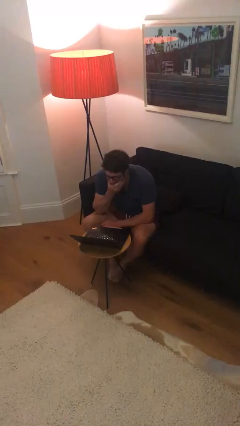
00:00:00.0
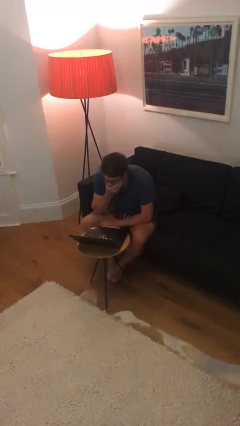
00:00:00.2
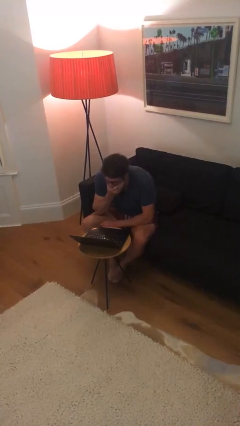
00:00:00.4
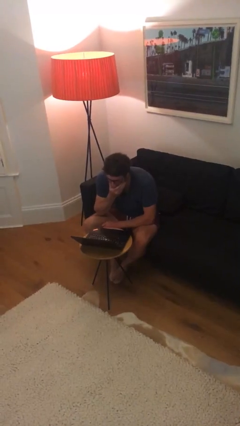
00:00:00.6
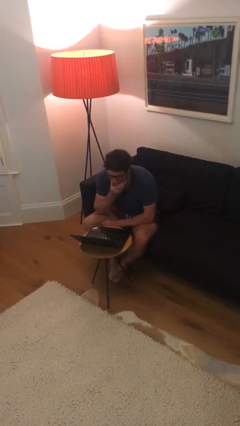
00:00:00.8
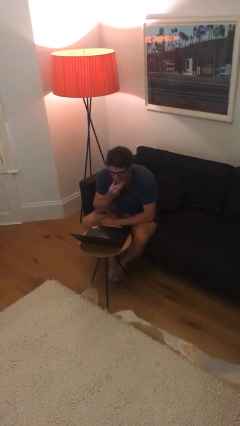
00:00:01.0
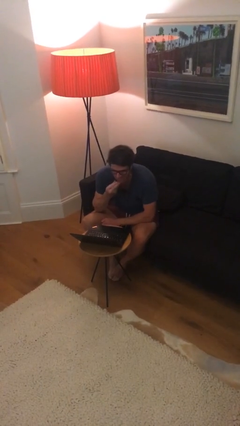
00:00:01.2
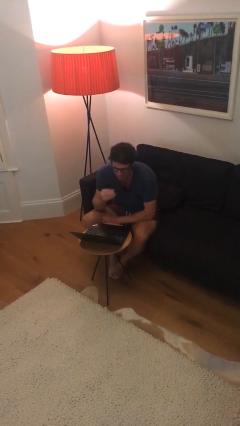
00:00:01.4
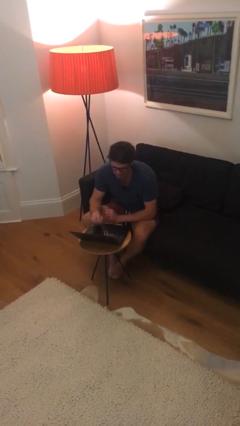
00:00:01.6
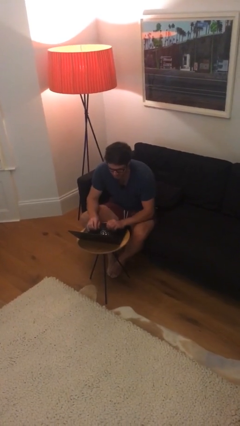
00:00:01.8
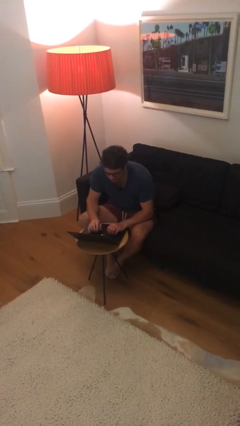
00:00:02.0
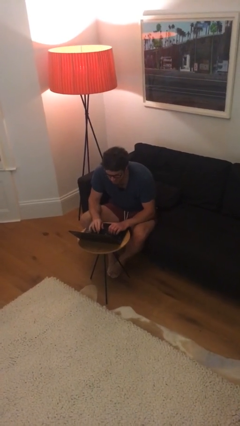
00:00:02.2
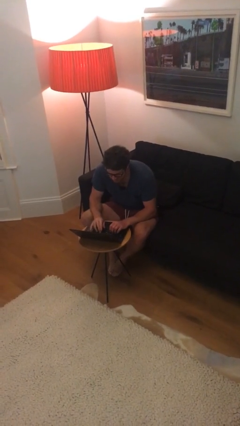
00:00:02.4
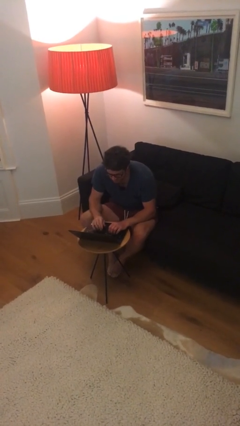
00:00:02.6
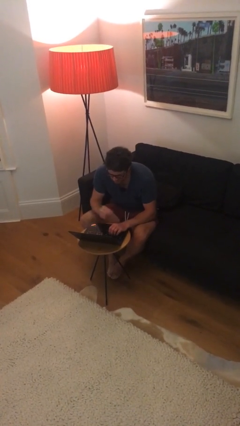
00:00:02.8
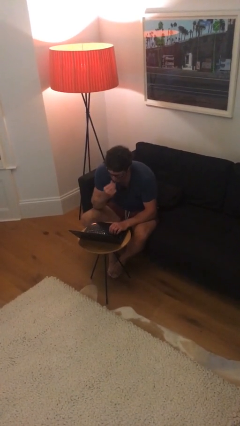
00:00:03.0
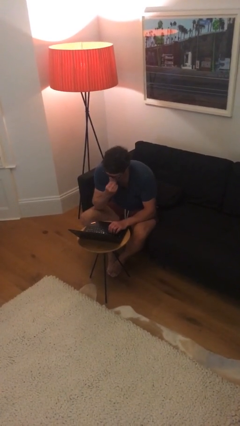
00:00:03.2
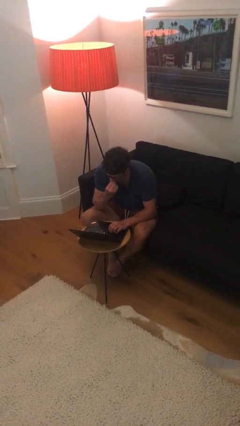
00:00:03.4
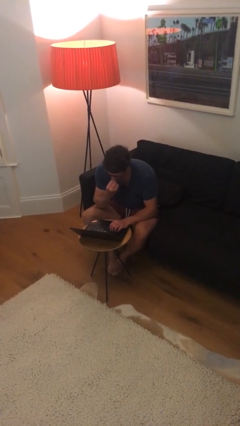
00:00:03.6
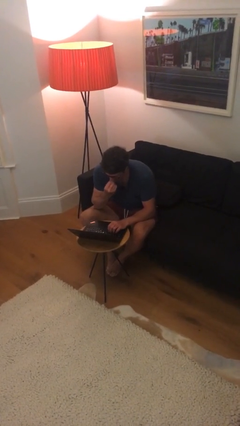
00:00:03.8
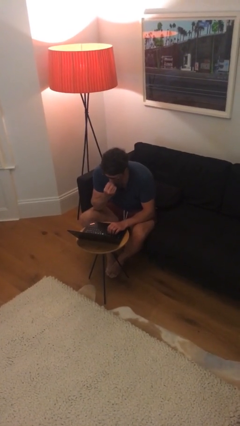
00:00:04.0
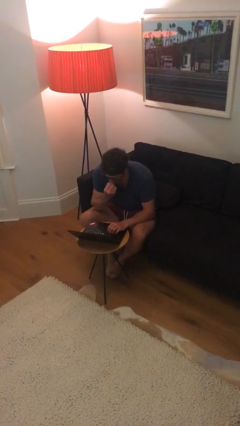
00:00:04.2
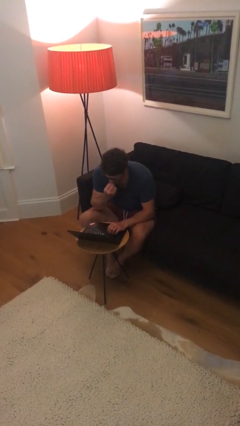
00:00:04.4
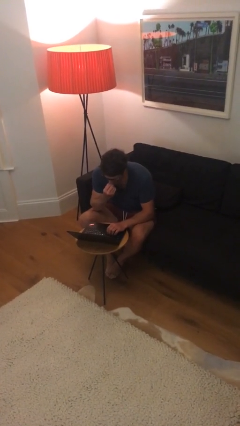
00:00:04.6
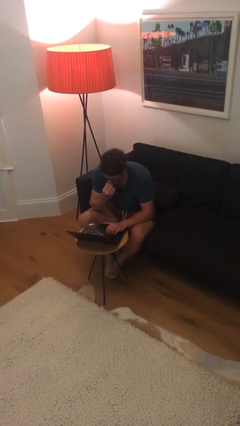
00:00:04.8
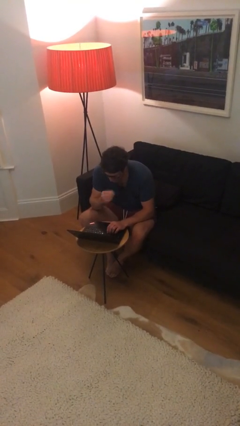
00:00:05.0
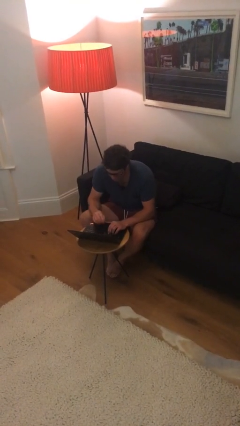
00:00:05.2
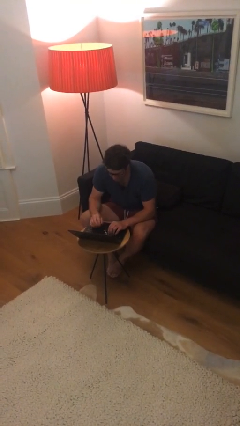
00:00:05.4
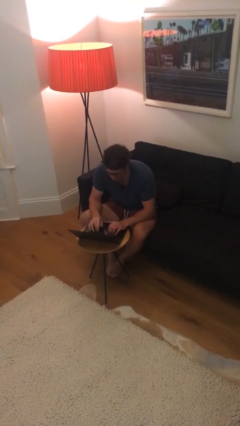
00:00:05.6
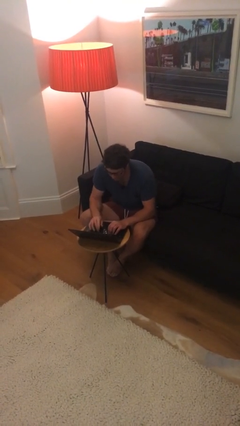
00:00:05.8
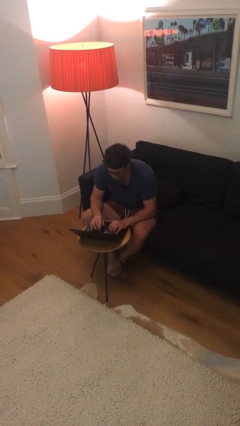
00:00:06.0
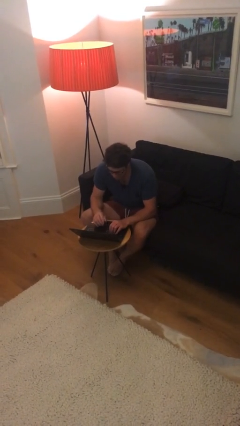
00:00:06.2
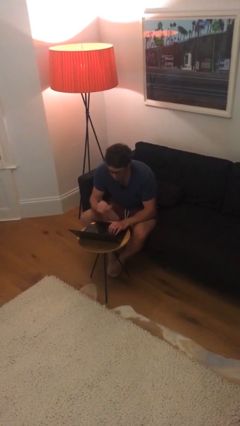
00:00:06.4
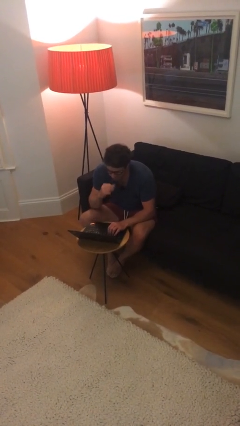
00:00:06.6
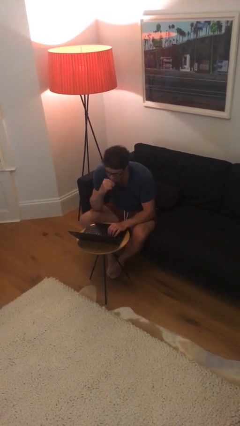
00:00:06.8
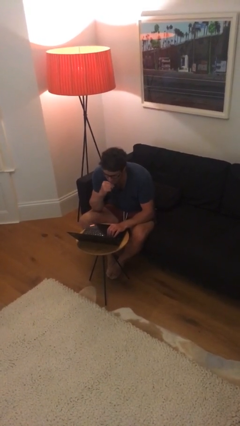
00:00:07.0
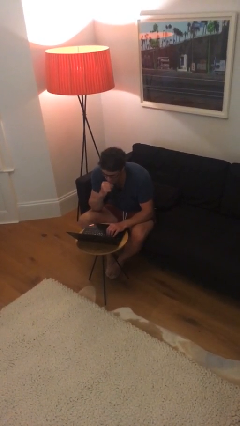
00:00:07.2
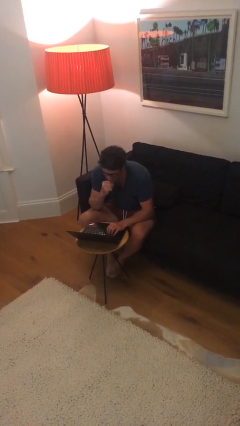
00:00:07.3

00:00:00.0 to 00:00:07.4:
person interacts with laptop

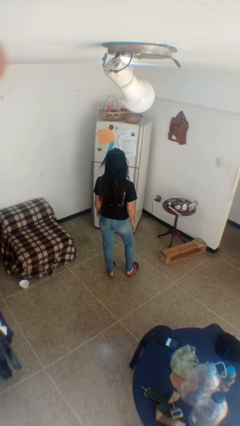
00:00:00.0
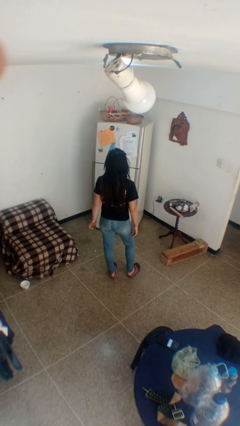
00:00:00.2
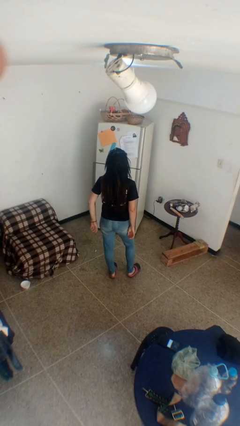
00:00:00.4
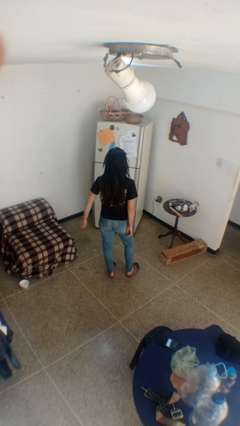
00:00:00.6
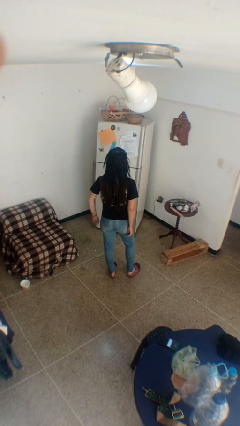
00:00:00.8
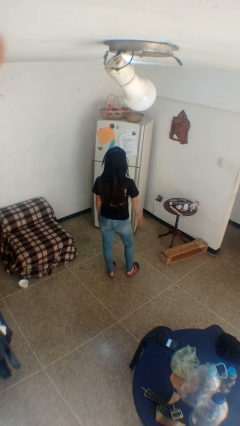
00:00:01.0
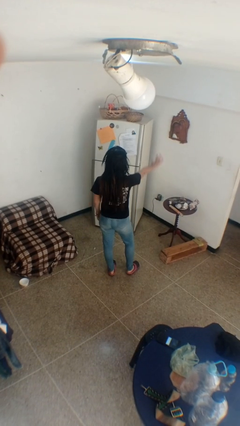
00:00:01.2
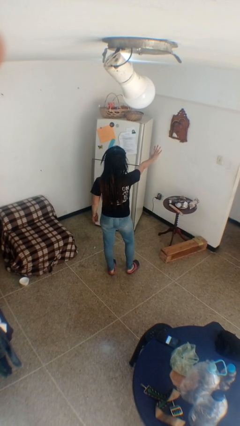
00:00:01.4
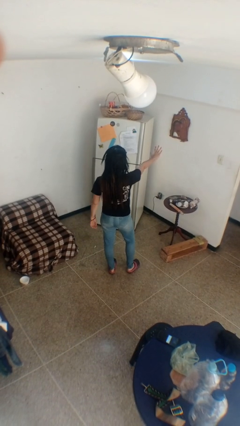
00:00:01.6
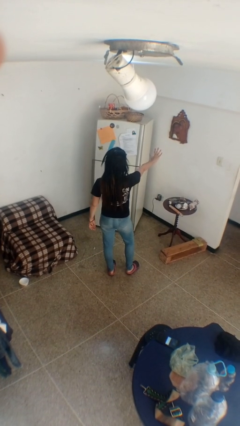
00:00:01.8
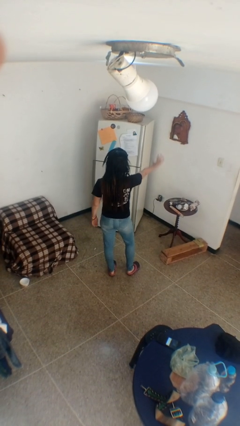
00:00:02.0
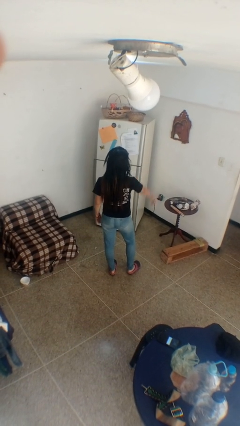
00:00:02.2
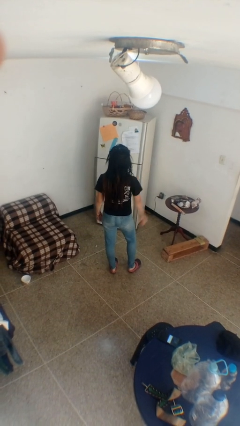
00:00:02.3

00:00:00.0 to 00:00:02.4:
person gestures stop

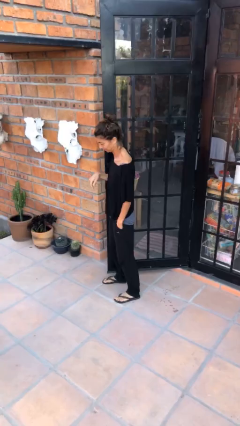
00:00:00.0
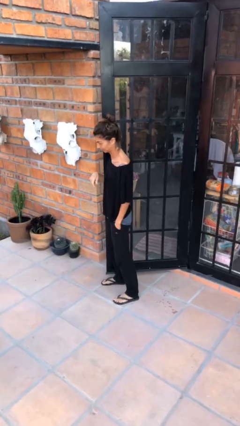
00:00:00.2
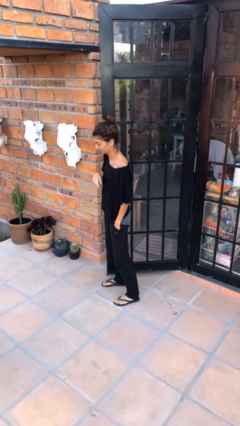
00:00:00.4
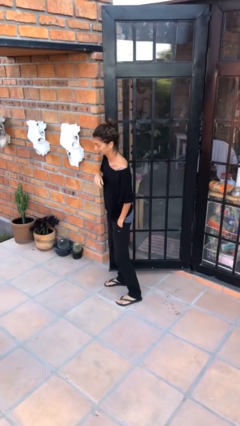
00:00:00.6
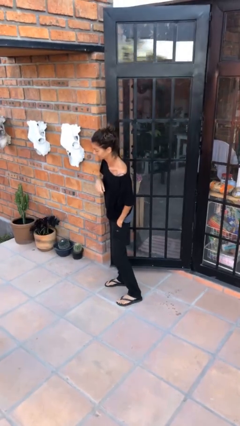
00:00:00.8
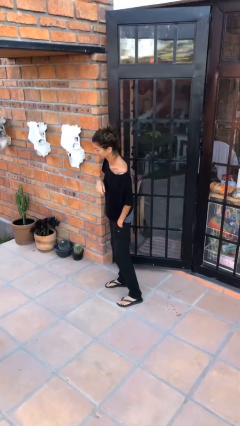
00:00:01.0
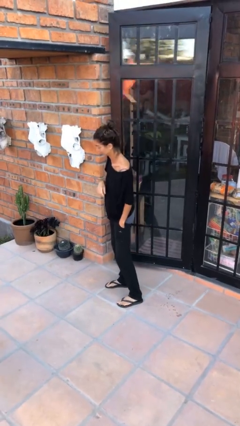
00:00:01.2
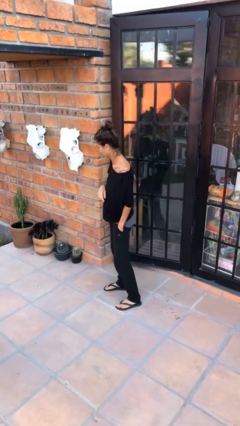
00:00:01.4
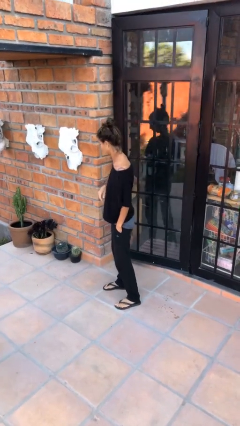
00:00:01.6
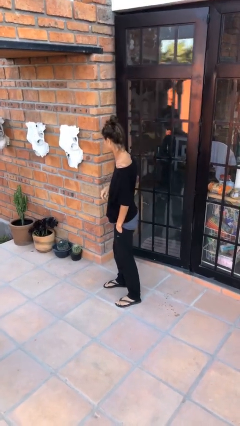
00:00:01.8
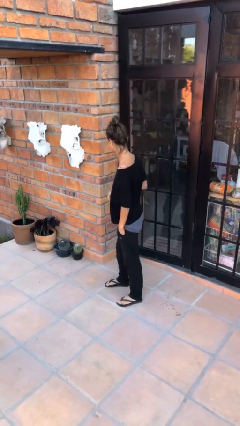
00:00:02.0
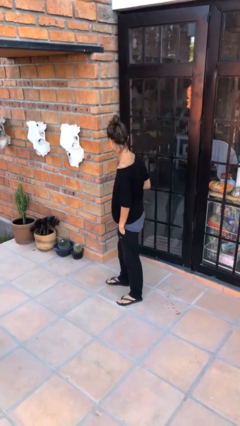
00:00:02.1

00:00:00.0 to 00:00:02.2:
person closes door with hip

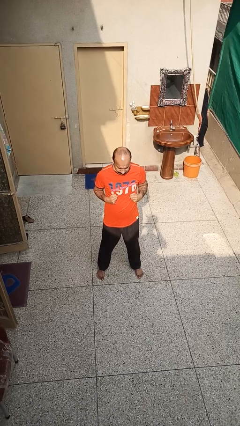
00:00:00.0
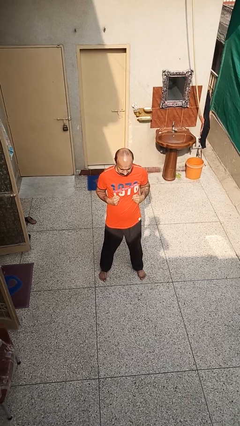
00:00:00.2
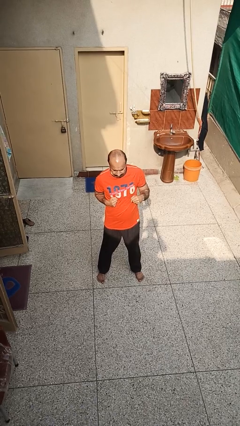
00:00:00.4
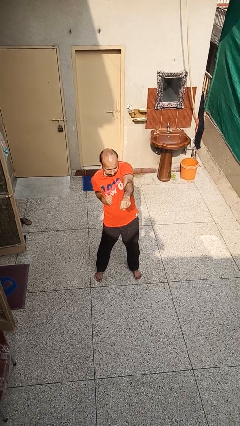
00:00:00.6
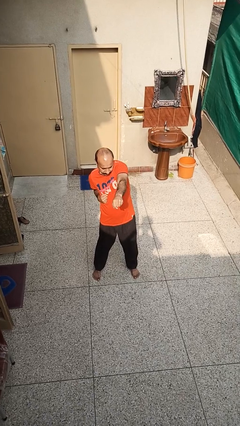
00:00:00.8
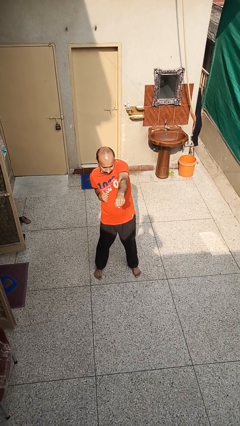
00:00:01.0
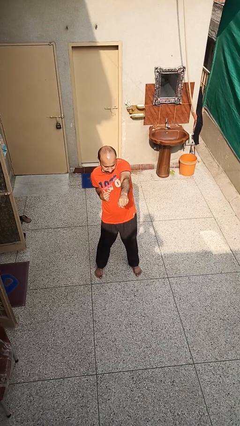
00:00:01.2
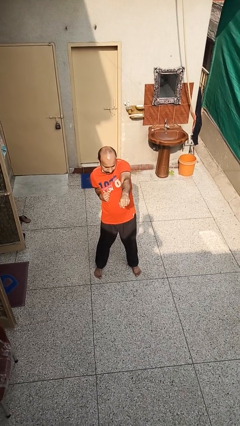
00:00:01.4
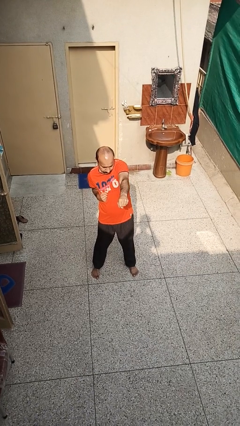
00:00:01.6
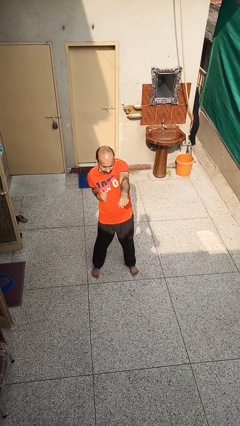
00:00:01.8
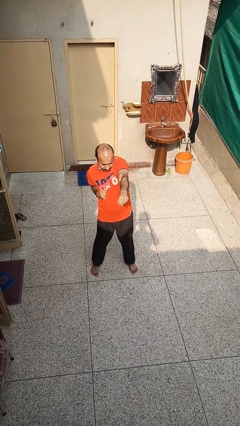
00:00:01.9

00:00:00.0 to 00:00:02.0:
person punches

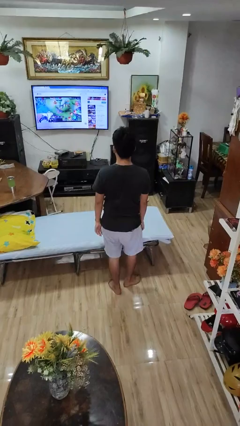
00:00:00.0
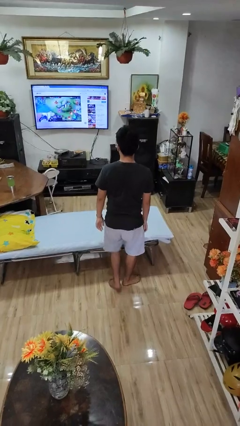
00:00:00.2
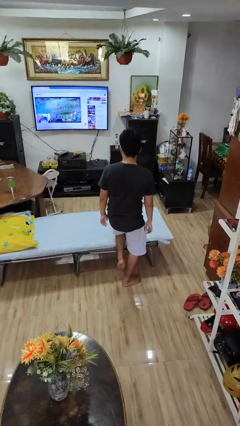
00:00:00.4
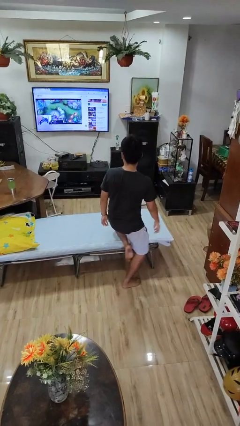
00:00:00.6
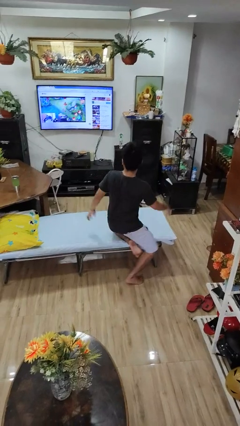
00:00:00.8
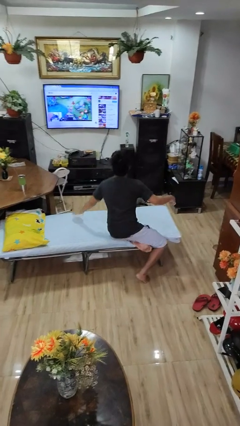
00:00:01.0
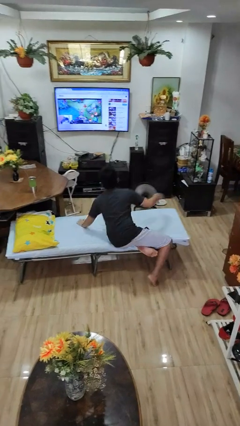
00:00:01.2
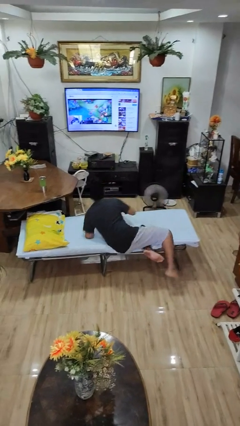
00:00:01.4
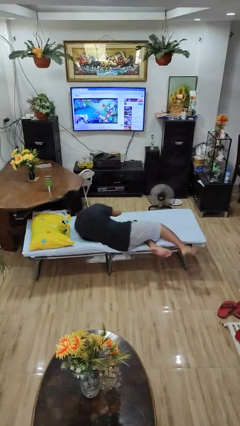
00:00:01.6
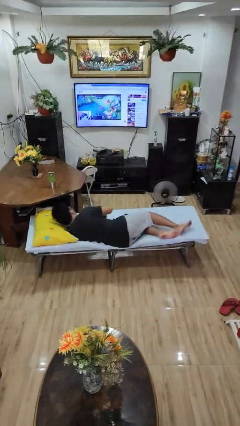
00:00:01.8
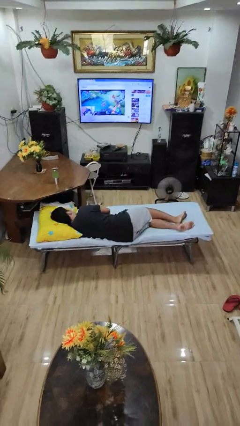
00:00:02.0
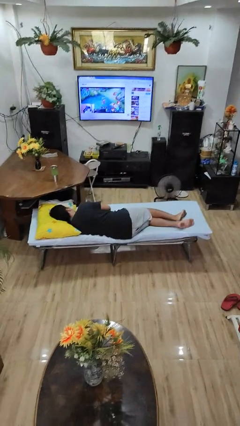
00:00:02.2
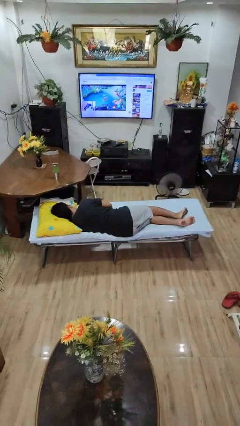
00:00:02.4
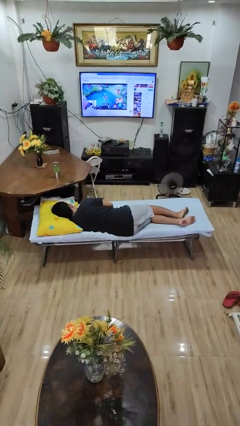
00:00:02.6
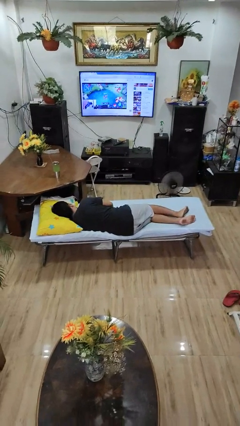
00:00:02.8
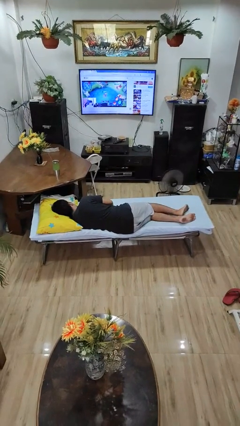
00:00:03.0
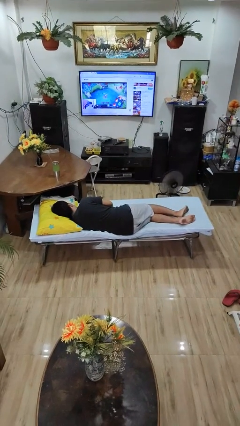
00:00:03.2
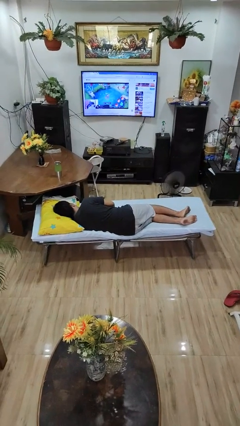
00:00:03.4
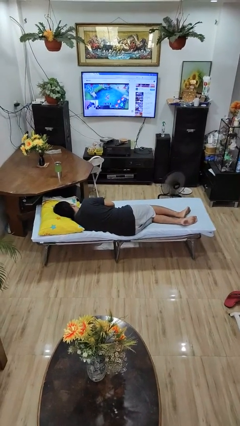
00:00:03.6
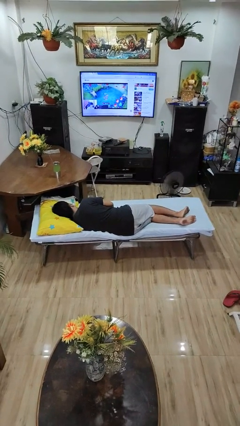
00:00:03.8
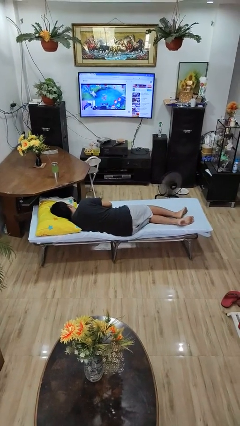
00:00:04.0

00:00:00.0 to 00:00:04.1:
person lies down on bed
